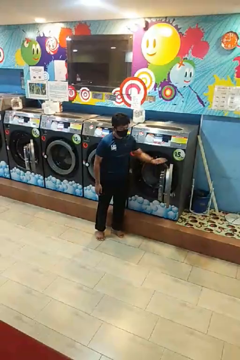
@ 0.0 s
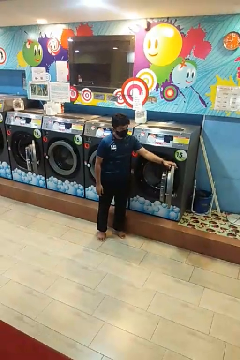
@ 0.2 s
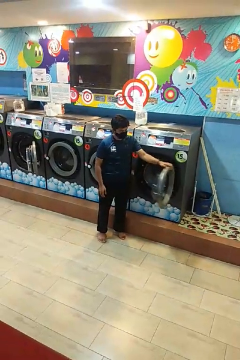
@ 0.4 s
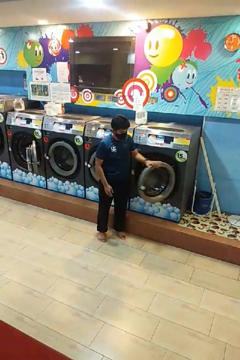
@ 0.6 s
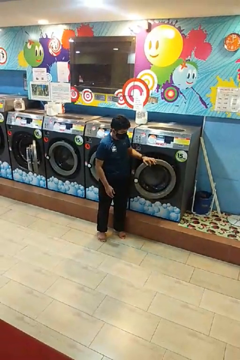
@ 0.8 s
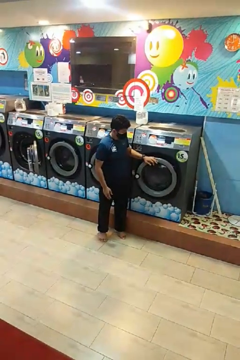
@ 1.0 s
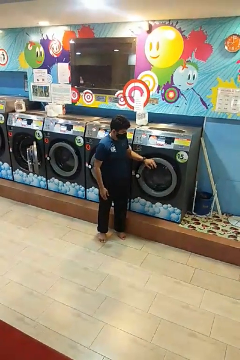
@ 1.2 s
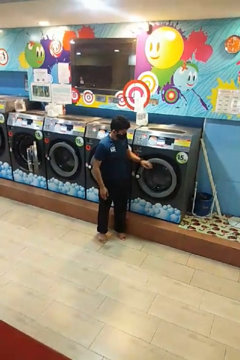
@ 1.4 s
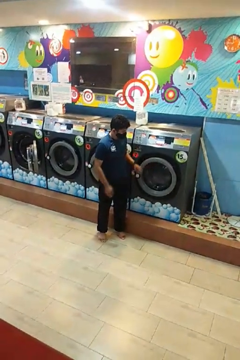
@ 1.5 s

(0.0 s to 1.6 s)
person closes clothes washer

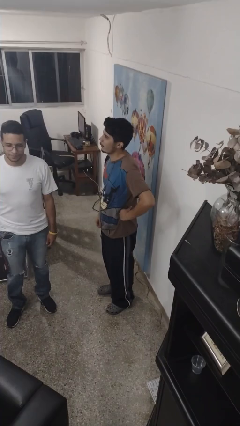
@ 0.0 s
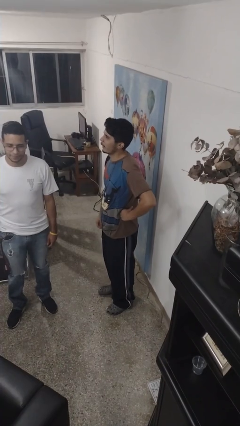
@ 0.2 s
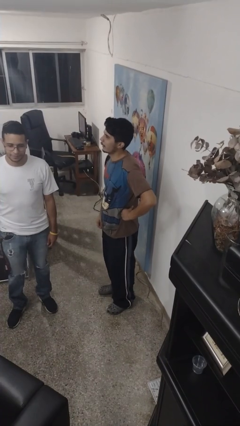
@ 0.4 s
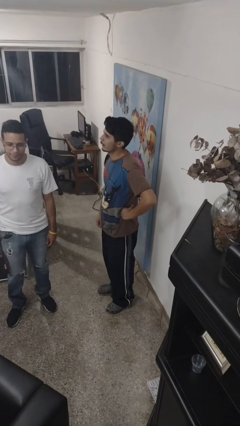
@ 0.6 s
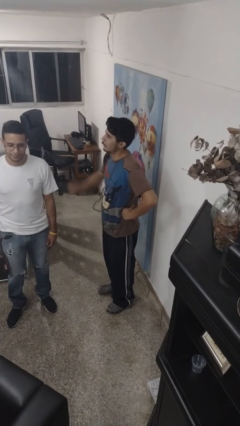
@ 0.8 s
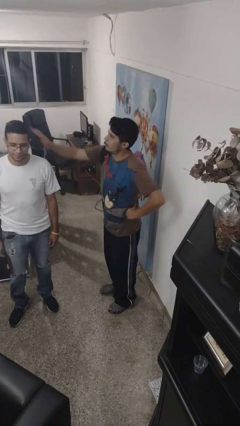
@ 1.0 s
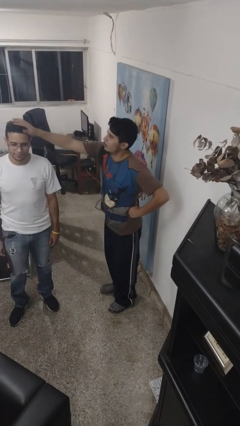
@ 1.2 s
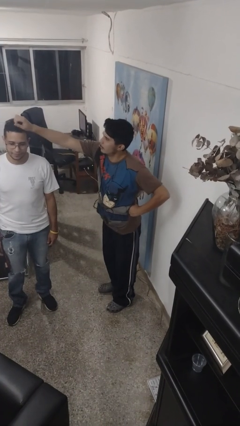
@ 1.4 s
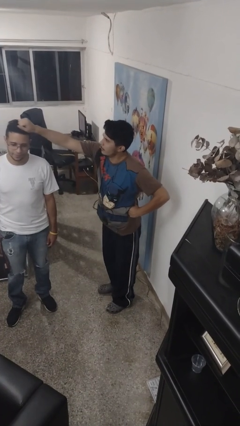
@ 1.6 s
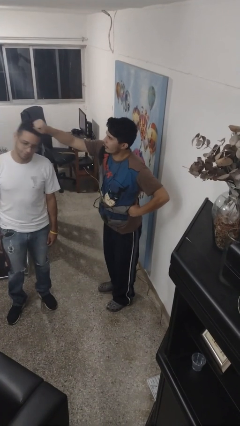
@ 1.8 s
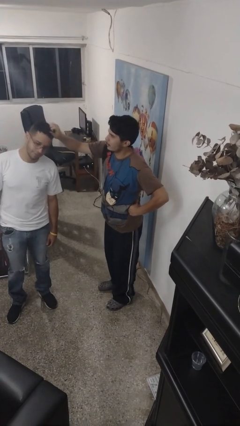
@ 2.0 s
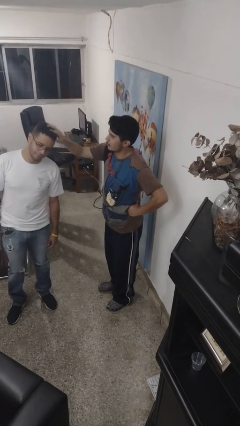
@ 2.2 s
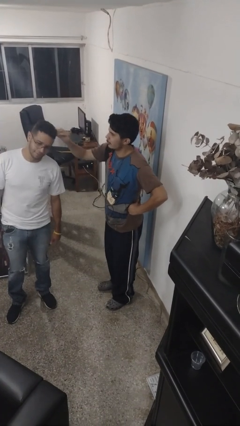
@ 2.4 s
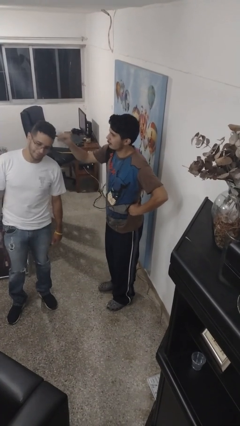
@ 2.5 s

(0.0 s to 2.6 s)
person grabs person by hair

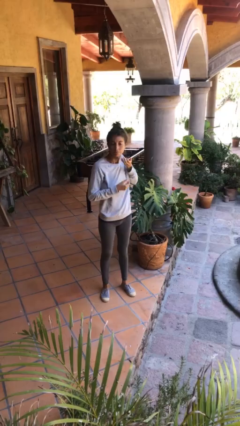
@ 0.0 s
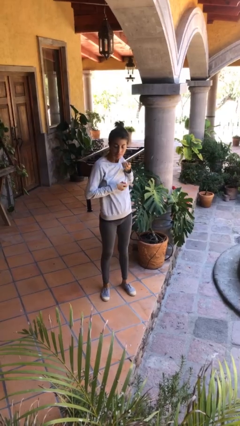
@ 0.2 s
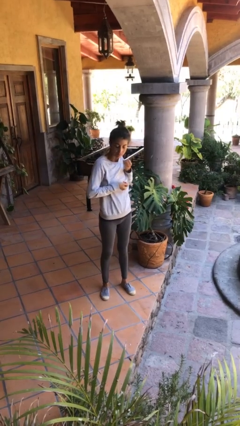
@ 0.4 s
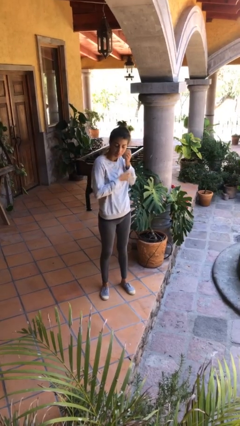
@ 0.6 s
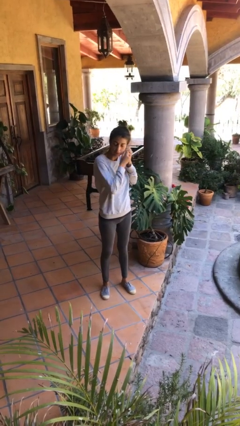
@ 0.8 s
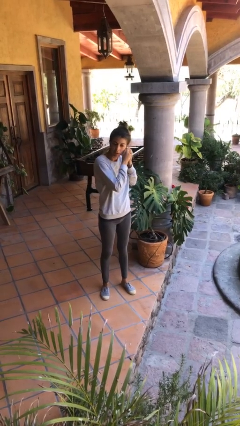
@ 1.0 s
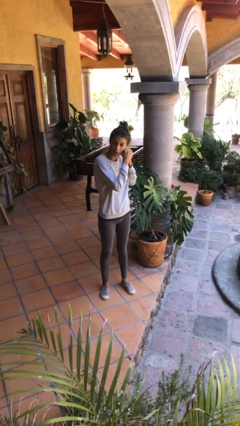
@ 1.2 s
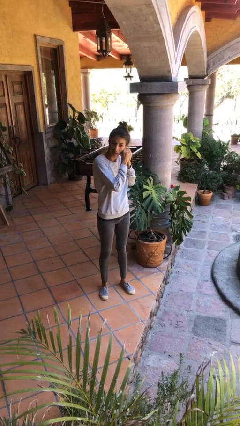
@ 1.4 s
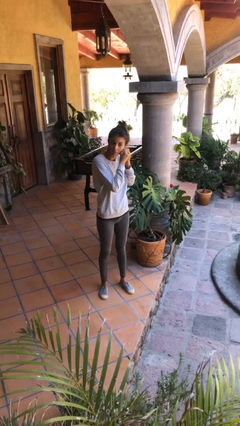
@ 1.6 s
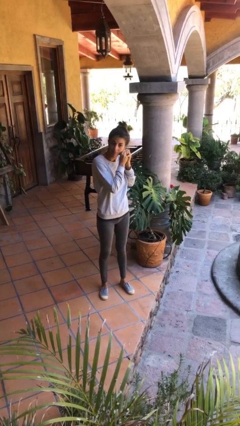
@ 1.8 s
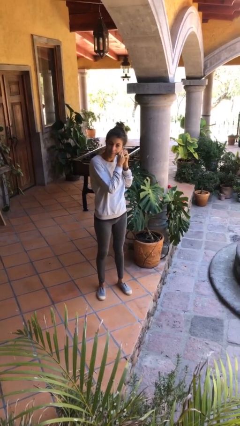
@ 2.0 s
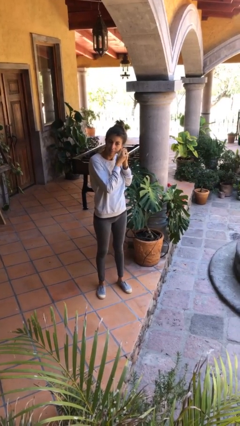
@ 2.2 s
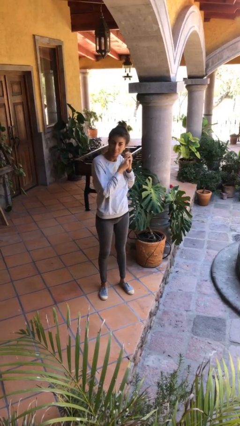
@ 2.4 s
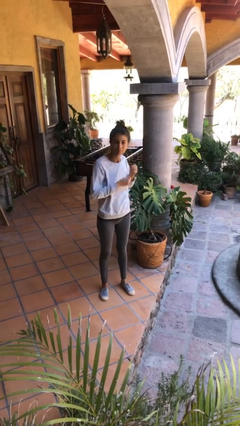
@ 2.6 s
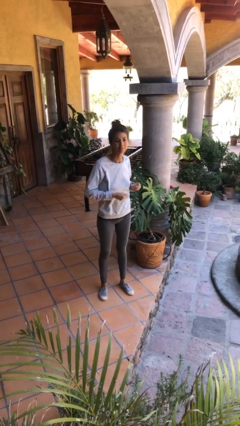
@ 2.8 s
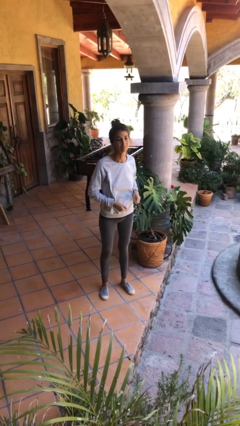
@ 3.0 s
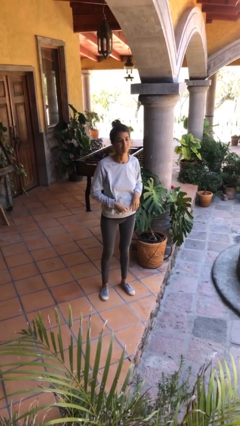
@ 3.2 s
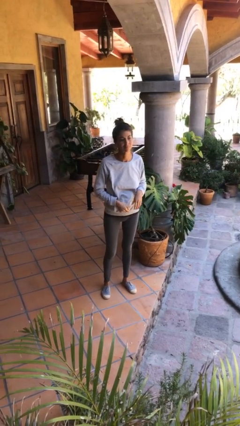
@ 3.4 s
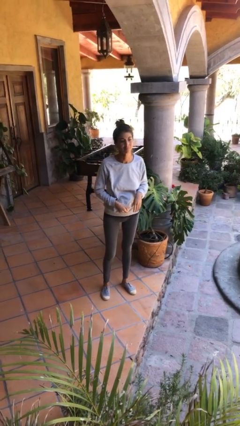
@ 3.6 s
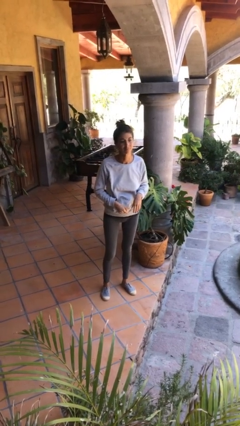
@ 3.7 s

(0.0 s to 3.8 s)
person takes off earrings

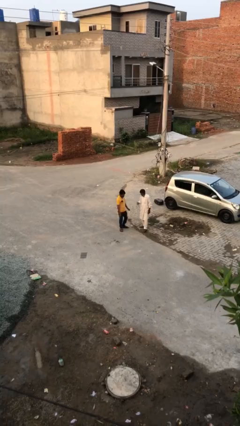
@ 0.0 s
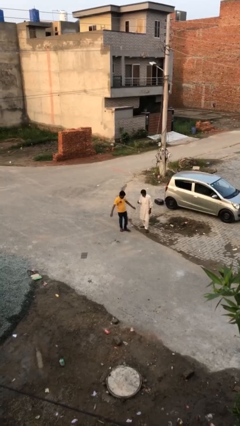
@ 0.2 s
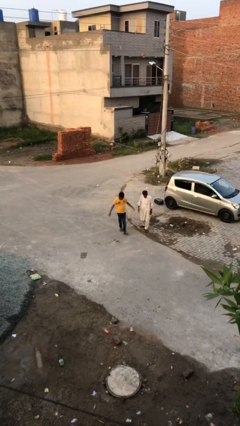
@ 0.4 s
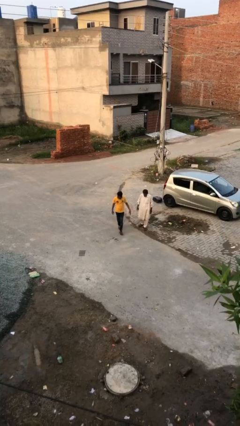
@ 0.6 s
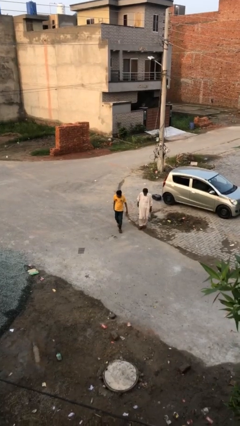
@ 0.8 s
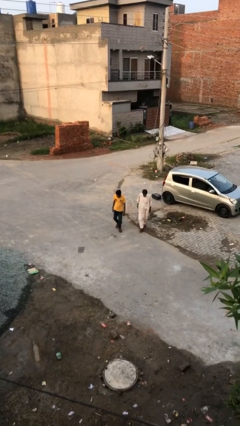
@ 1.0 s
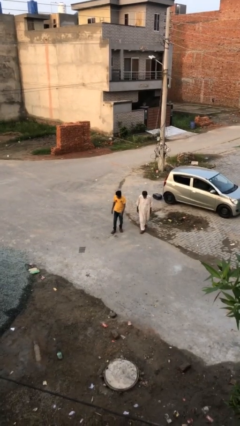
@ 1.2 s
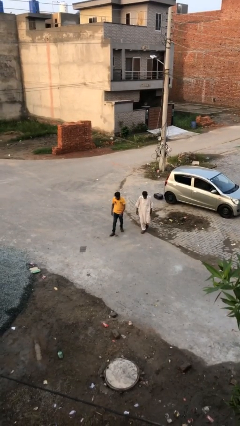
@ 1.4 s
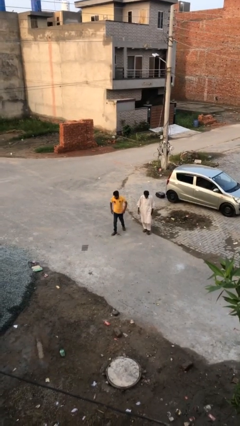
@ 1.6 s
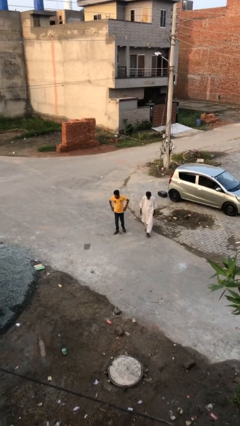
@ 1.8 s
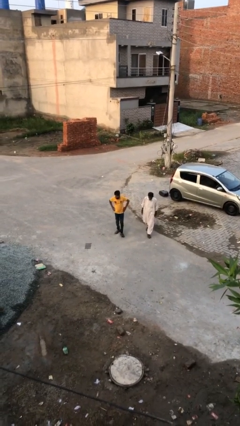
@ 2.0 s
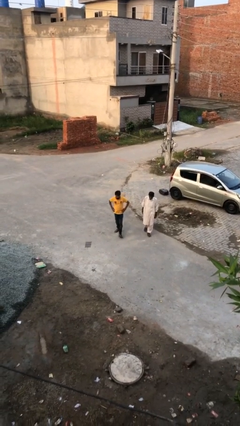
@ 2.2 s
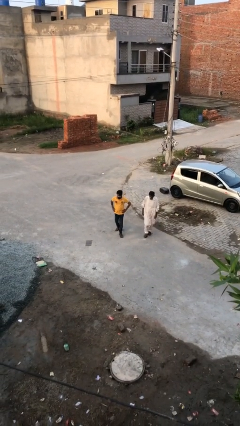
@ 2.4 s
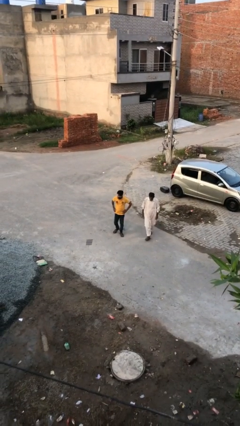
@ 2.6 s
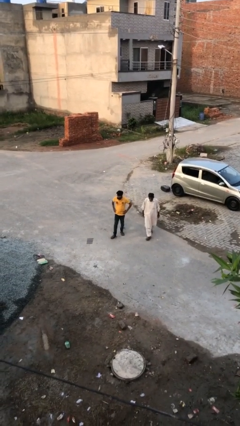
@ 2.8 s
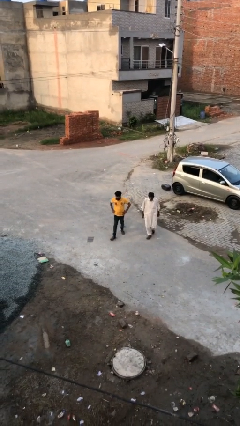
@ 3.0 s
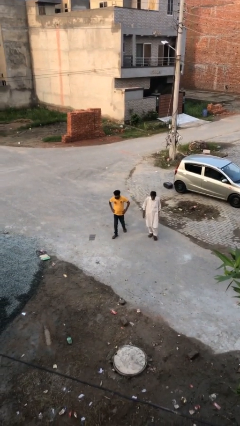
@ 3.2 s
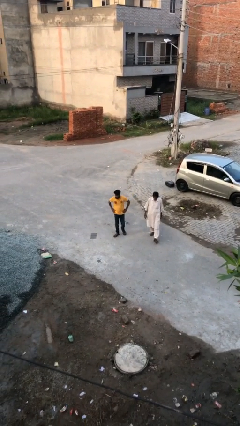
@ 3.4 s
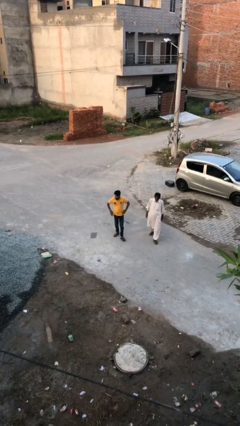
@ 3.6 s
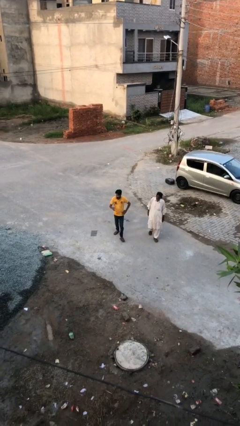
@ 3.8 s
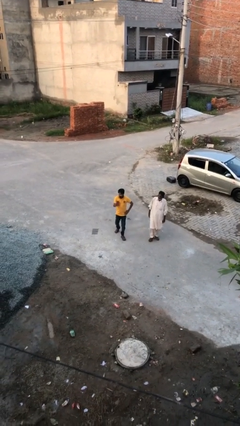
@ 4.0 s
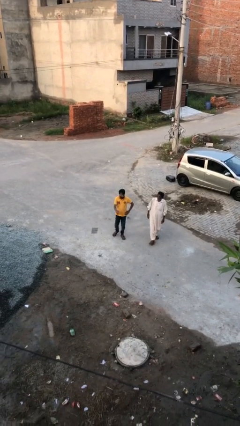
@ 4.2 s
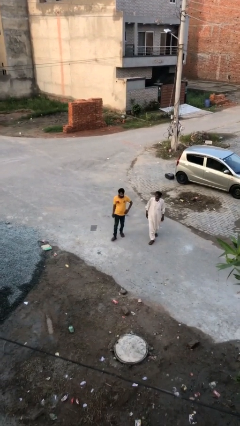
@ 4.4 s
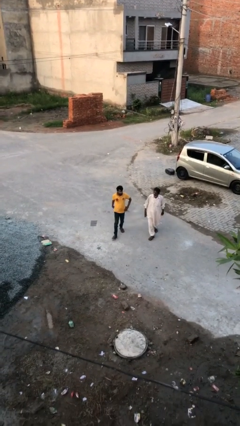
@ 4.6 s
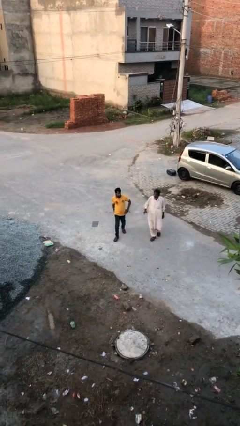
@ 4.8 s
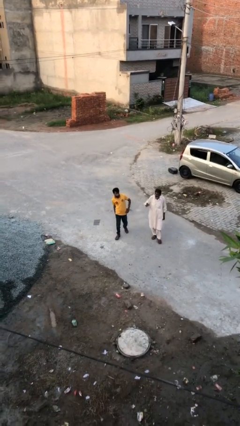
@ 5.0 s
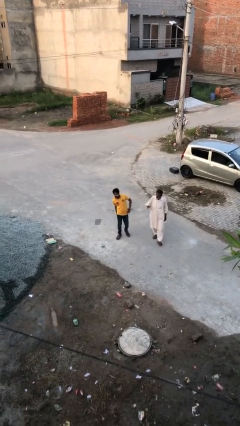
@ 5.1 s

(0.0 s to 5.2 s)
person talks to person

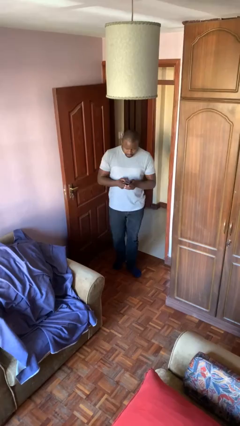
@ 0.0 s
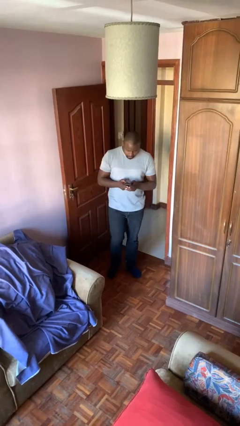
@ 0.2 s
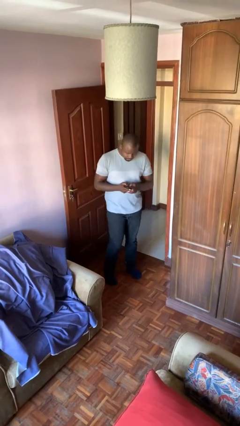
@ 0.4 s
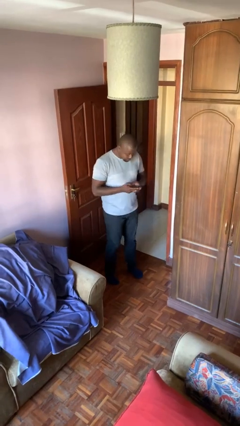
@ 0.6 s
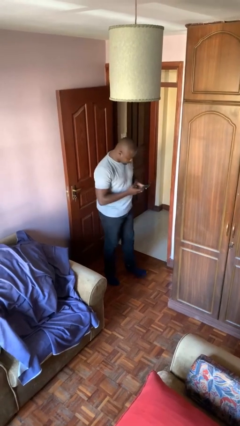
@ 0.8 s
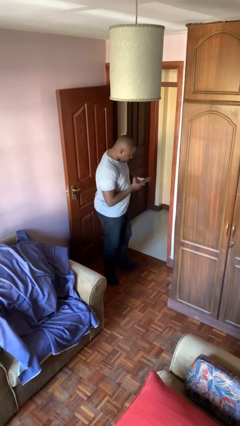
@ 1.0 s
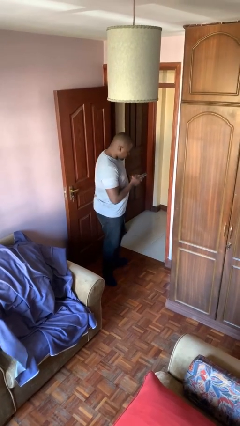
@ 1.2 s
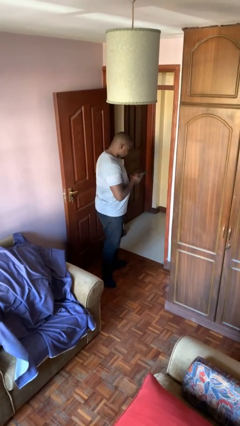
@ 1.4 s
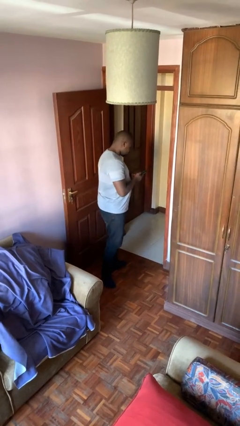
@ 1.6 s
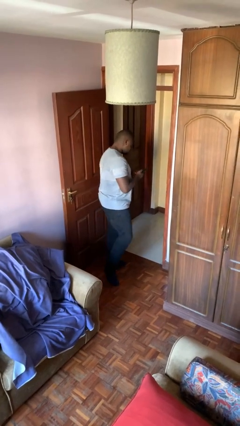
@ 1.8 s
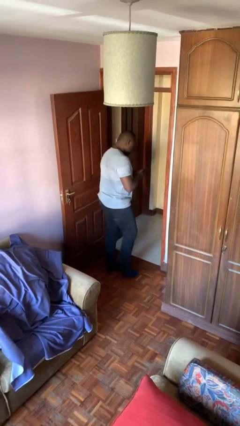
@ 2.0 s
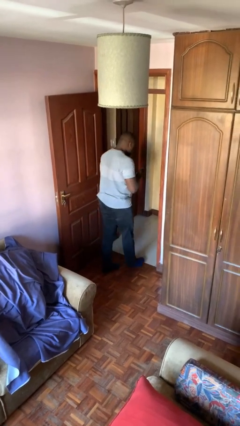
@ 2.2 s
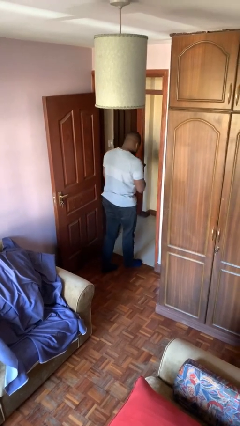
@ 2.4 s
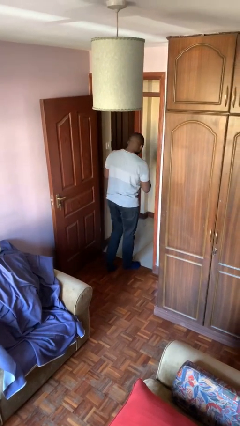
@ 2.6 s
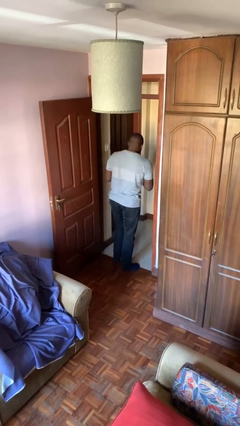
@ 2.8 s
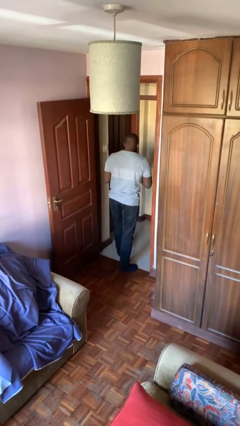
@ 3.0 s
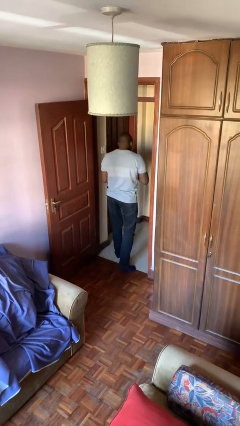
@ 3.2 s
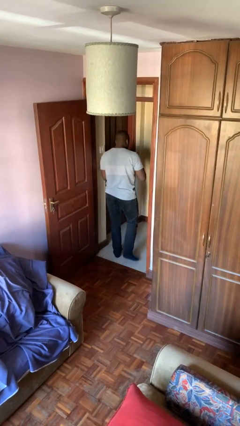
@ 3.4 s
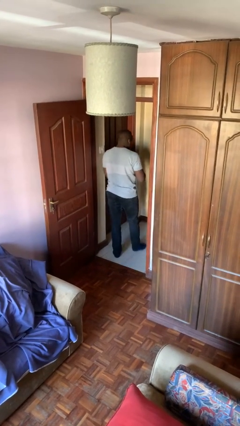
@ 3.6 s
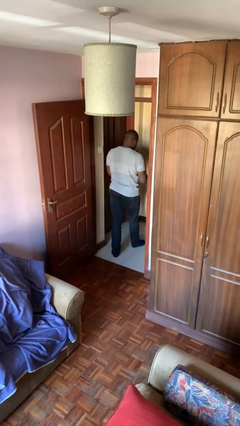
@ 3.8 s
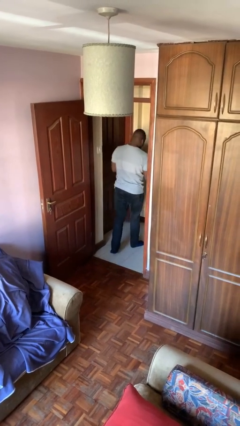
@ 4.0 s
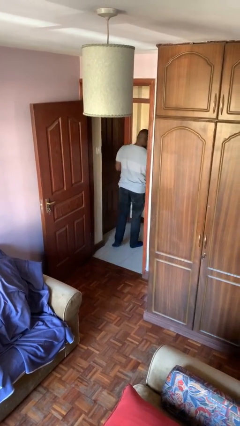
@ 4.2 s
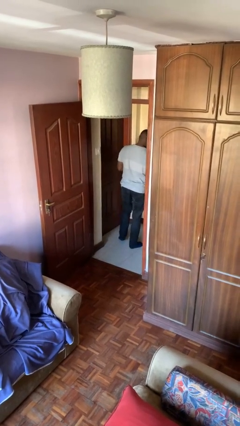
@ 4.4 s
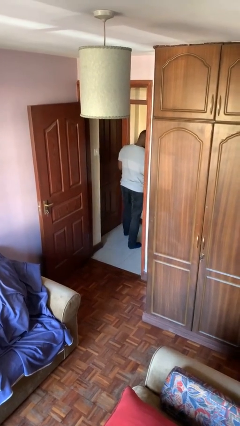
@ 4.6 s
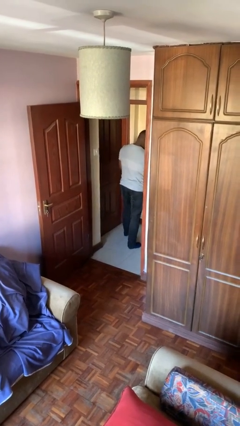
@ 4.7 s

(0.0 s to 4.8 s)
person exits scene through structure

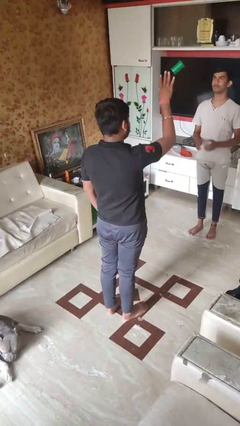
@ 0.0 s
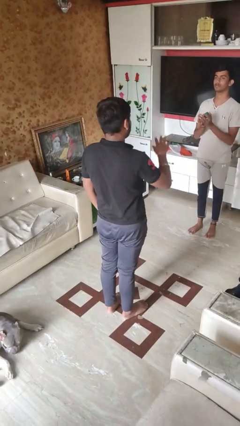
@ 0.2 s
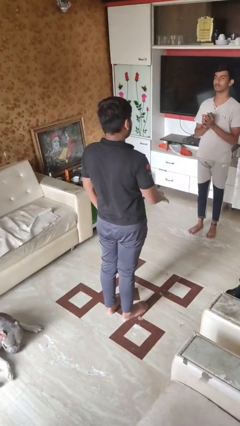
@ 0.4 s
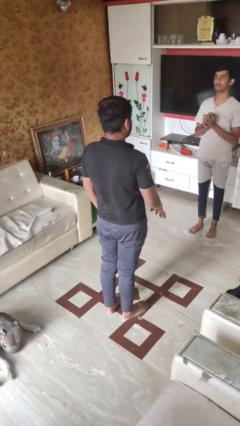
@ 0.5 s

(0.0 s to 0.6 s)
person throws object to person
